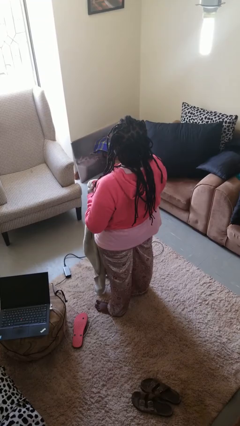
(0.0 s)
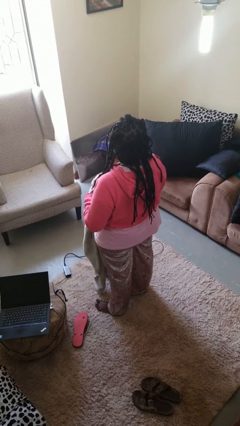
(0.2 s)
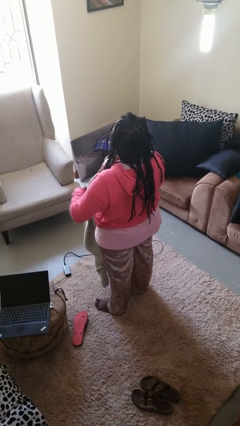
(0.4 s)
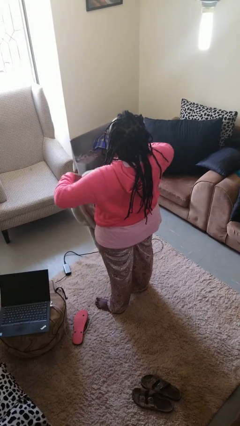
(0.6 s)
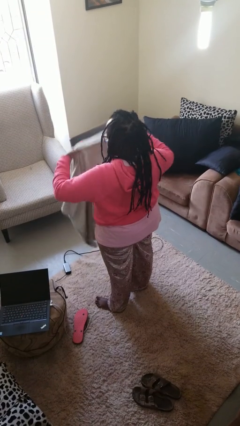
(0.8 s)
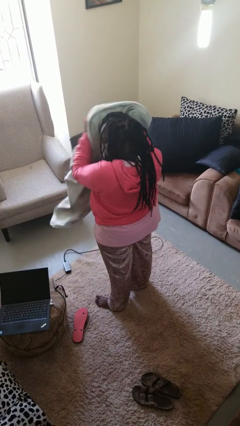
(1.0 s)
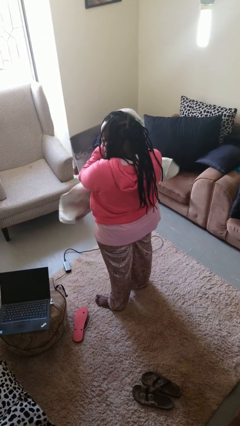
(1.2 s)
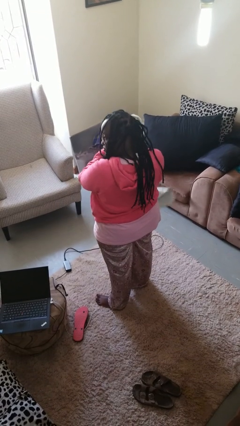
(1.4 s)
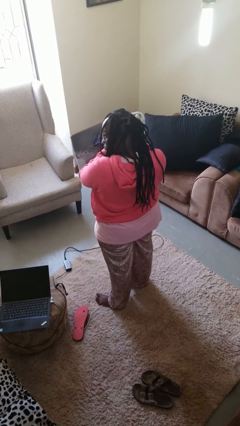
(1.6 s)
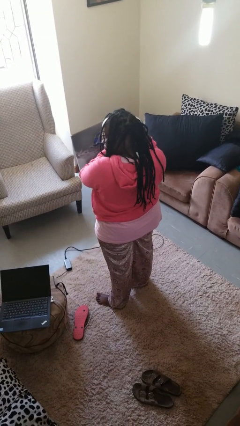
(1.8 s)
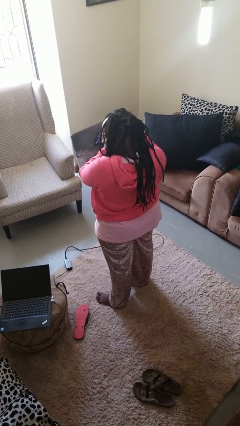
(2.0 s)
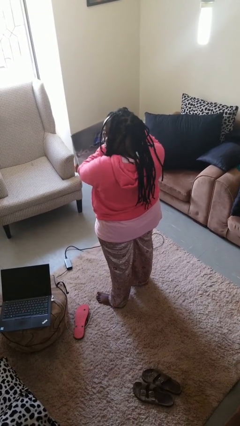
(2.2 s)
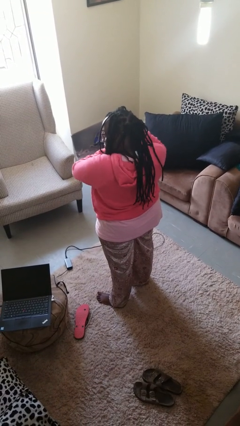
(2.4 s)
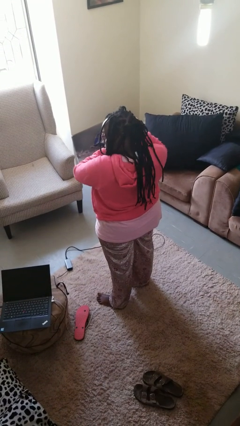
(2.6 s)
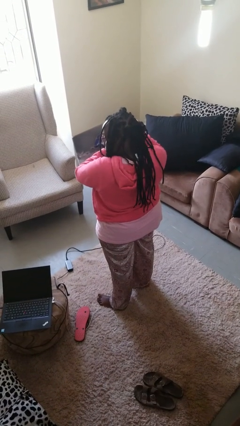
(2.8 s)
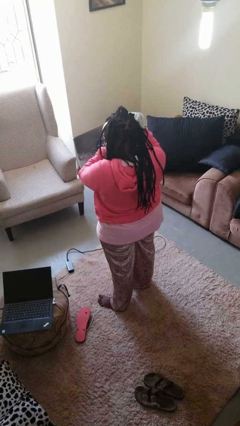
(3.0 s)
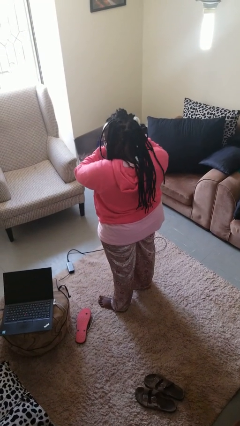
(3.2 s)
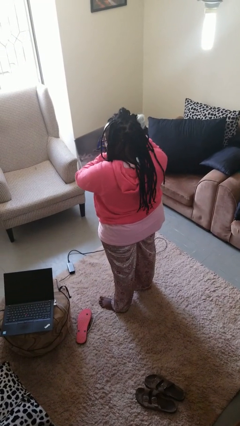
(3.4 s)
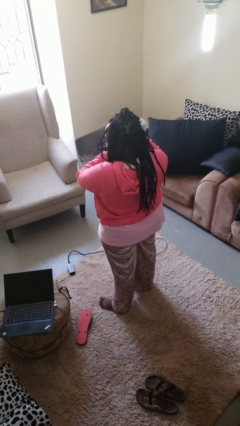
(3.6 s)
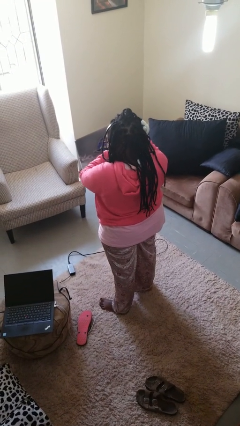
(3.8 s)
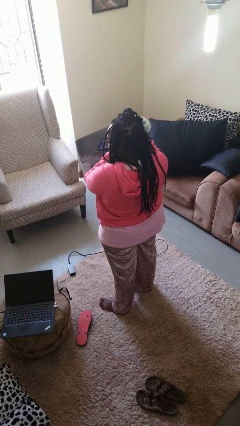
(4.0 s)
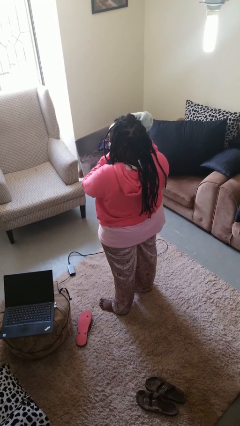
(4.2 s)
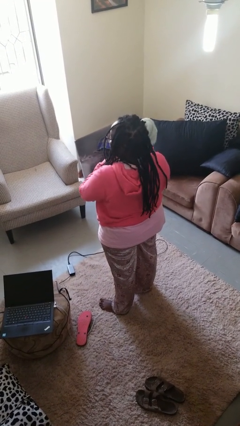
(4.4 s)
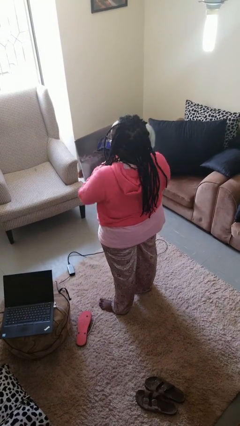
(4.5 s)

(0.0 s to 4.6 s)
person dries hair with towel

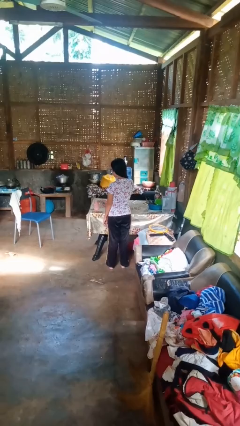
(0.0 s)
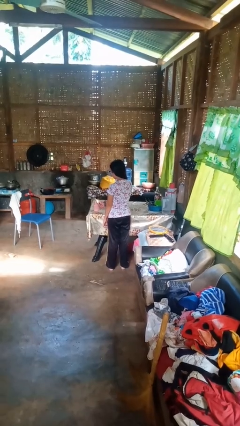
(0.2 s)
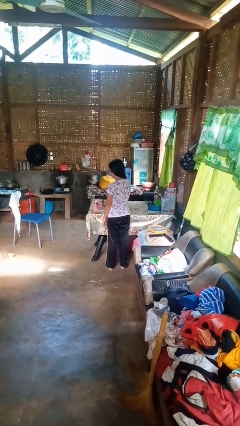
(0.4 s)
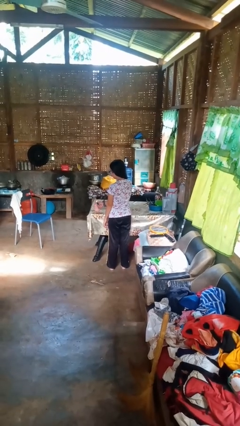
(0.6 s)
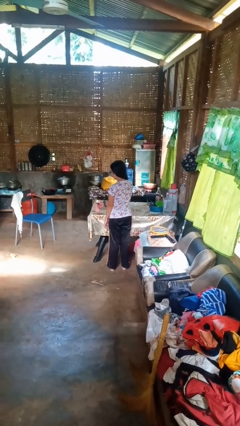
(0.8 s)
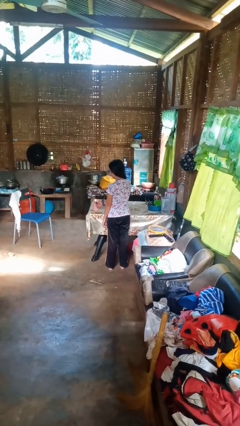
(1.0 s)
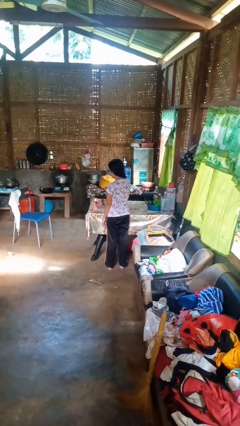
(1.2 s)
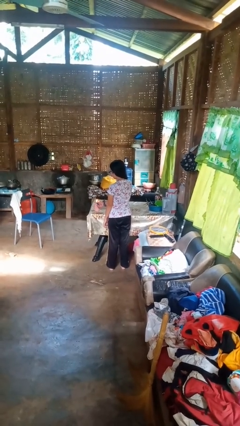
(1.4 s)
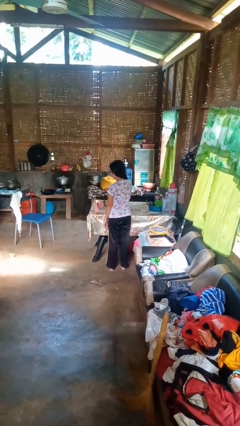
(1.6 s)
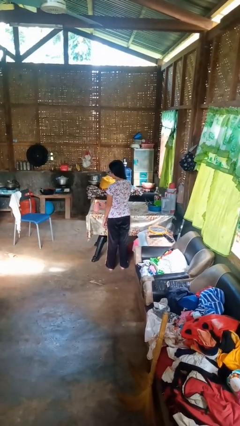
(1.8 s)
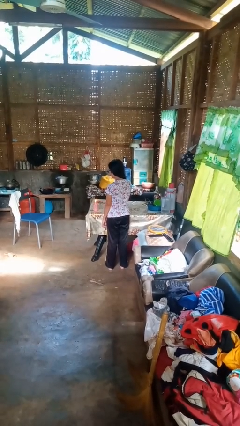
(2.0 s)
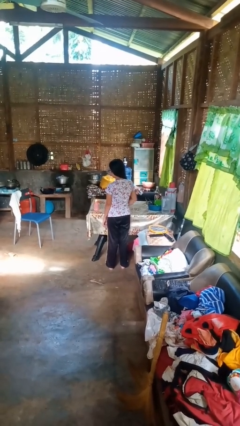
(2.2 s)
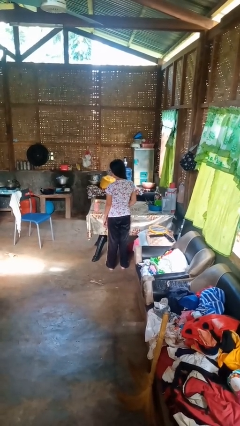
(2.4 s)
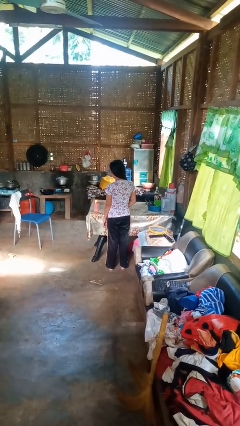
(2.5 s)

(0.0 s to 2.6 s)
person lights candle

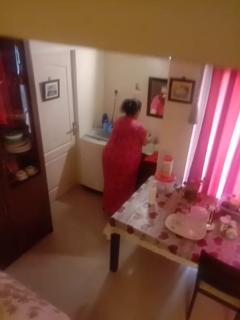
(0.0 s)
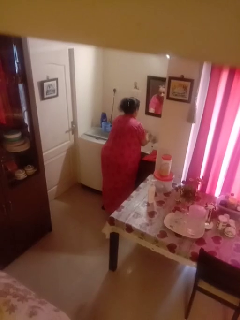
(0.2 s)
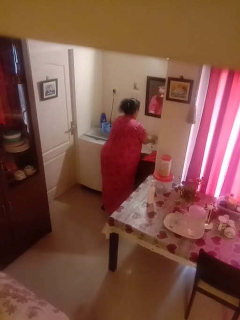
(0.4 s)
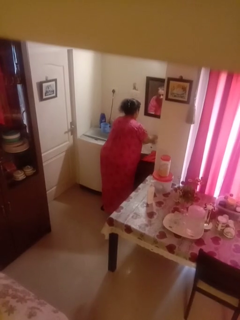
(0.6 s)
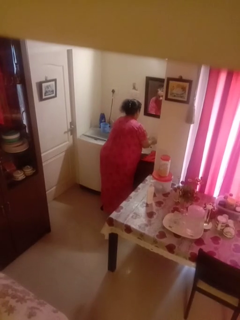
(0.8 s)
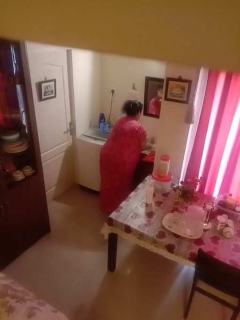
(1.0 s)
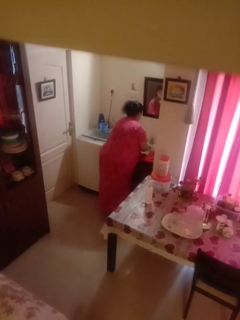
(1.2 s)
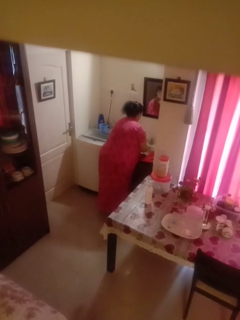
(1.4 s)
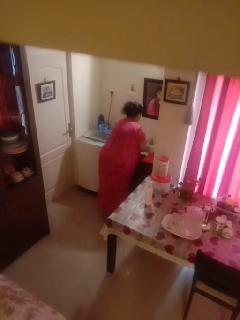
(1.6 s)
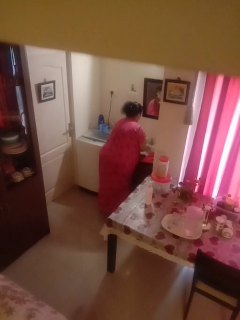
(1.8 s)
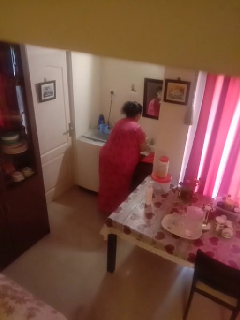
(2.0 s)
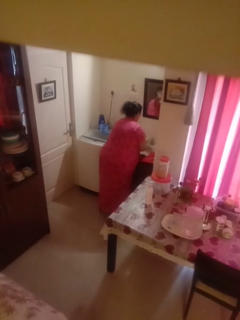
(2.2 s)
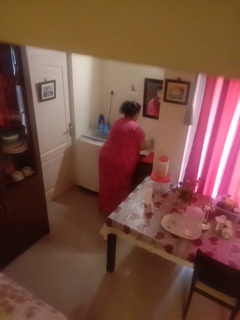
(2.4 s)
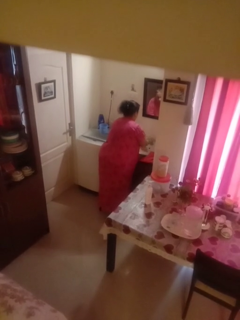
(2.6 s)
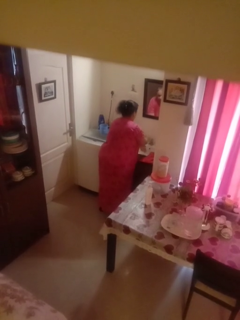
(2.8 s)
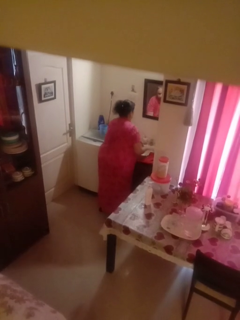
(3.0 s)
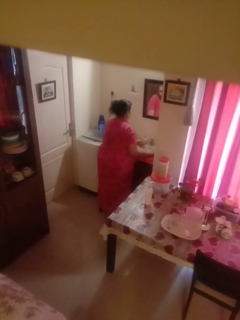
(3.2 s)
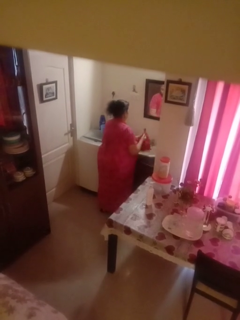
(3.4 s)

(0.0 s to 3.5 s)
person washes hands

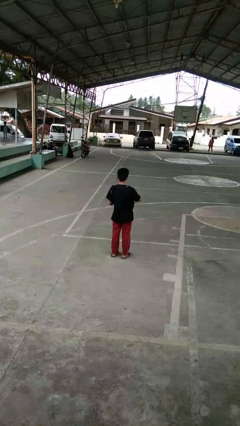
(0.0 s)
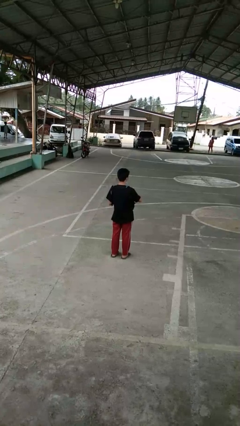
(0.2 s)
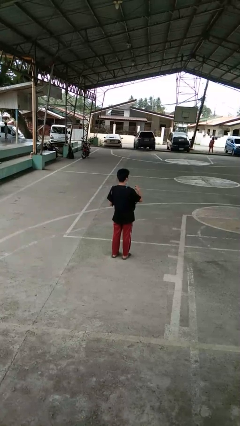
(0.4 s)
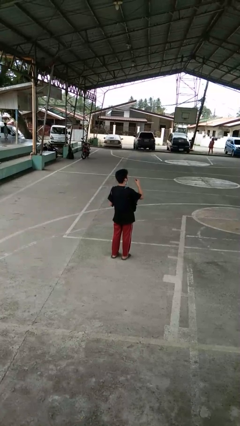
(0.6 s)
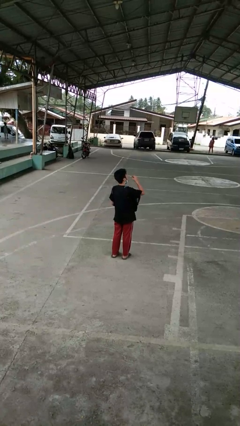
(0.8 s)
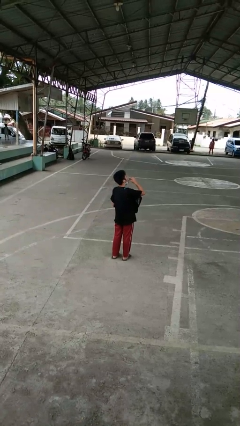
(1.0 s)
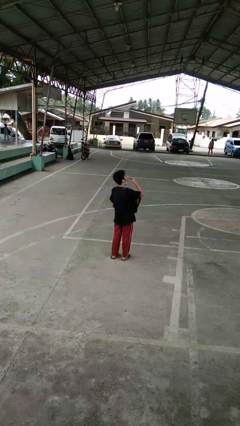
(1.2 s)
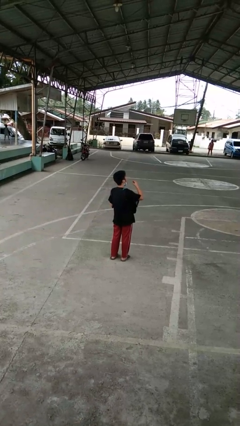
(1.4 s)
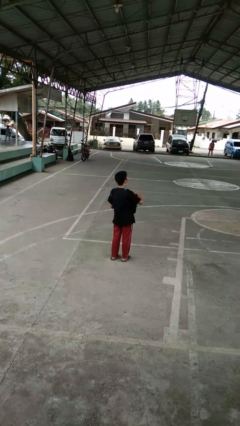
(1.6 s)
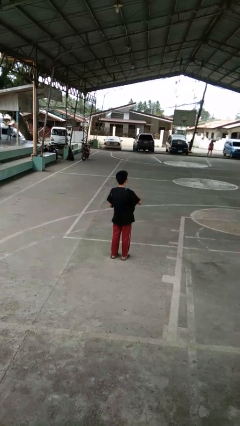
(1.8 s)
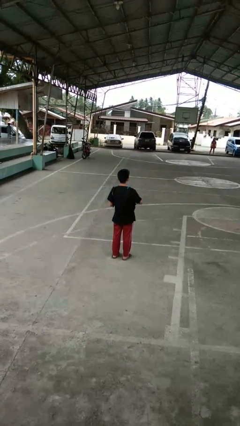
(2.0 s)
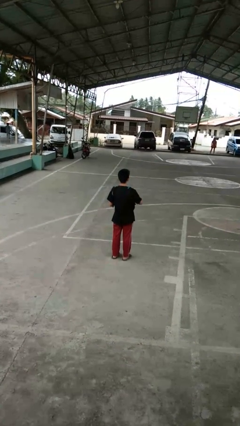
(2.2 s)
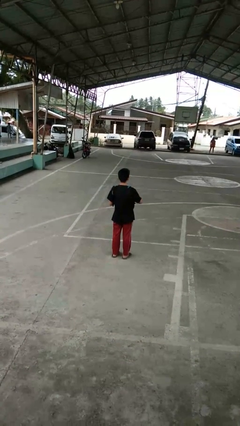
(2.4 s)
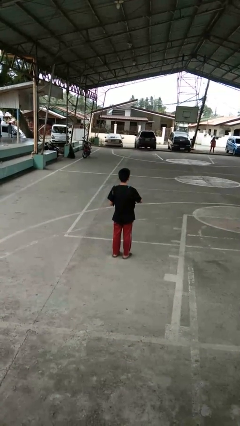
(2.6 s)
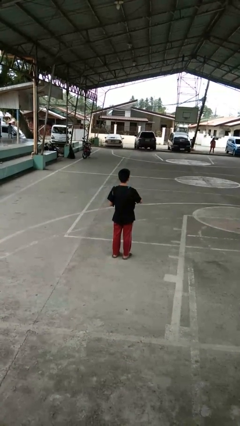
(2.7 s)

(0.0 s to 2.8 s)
person eats snack from bag

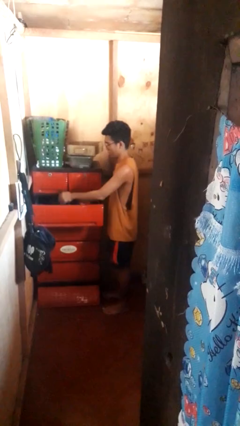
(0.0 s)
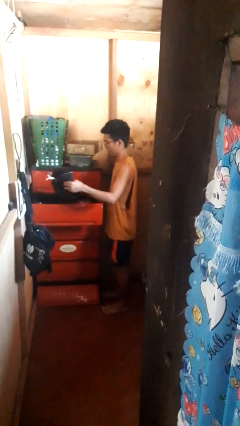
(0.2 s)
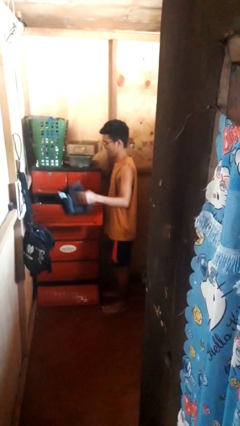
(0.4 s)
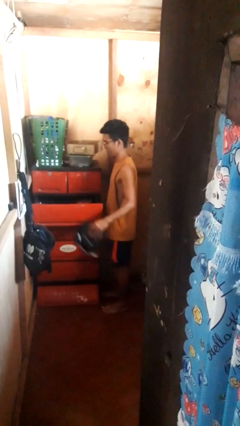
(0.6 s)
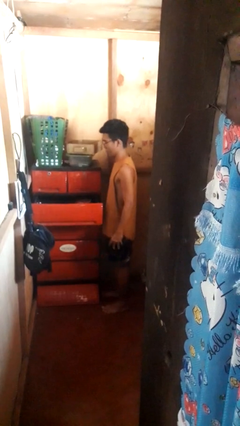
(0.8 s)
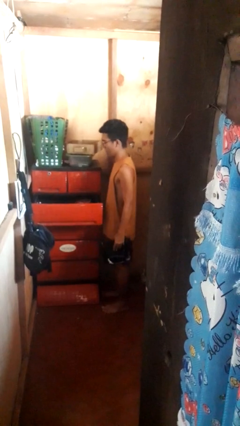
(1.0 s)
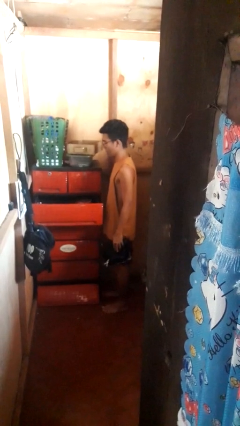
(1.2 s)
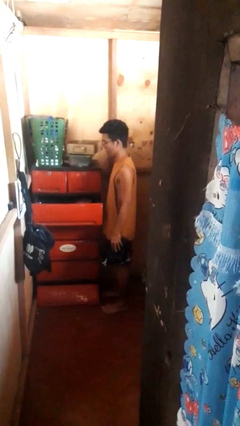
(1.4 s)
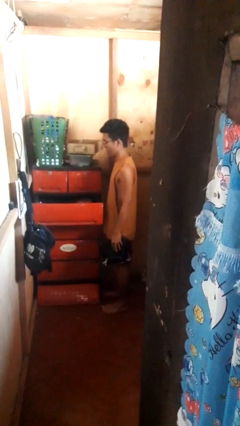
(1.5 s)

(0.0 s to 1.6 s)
person takes clothes from dresser

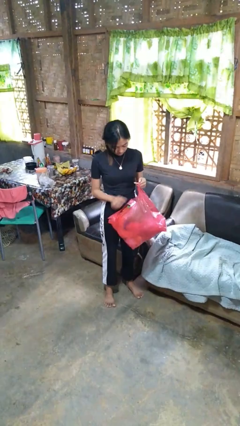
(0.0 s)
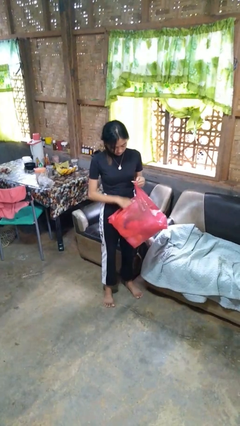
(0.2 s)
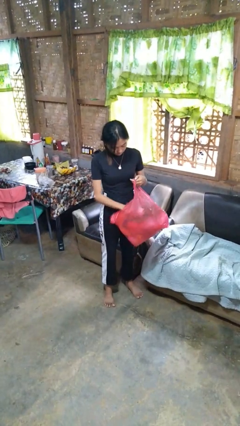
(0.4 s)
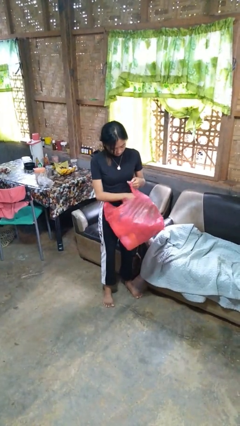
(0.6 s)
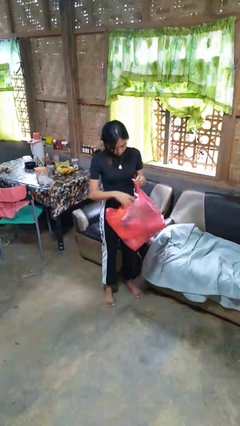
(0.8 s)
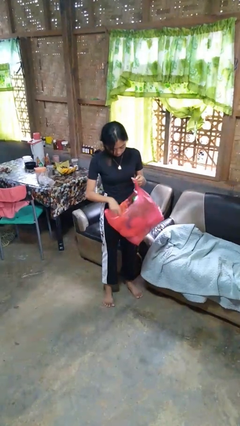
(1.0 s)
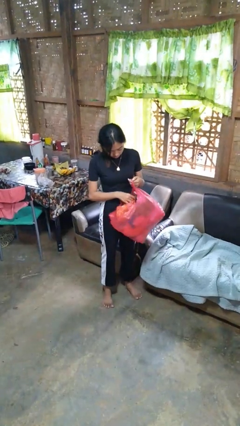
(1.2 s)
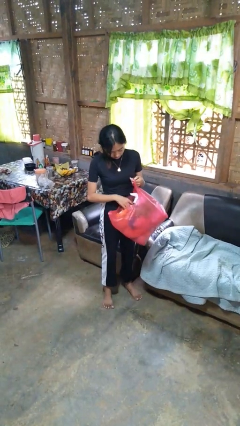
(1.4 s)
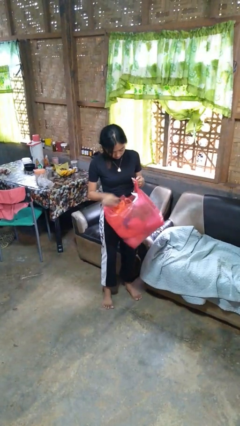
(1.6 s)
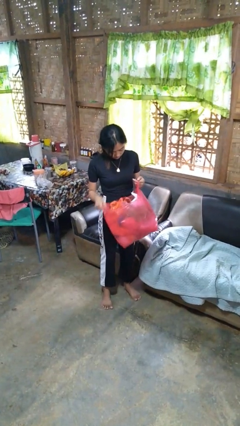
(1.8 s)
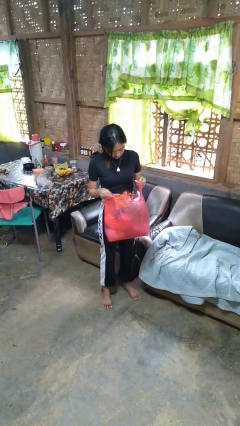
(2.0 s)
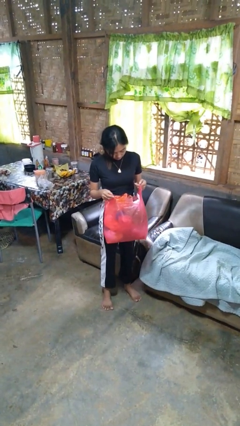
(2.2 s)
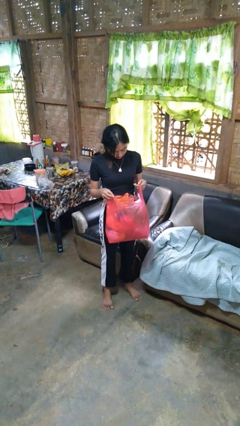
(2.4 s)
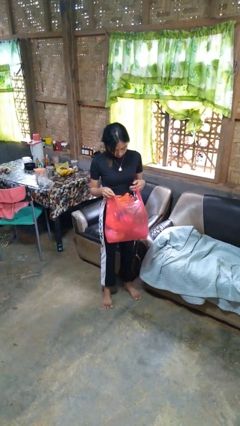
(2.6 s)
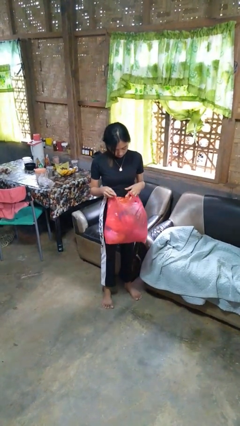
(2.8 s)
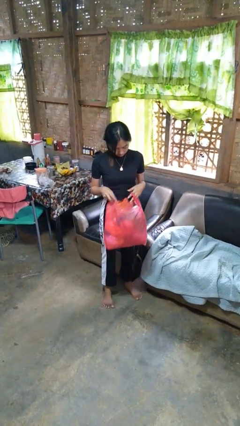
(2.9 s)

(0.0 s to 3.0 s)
person searches in bag
